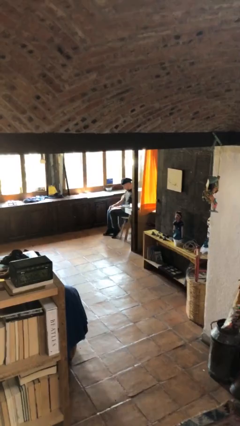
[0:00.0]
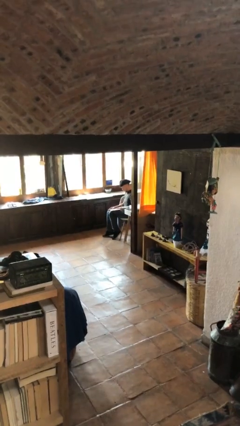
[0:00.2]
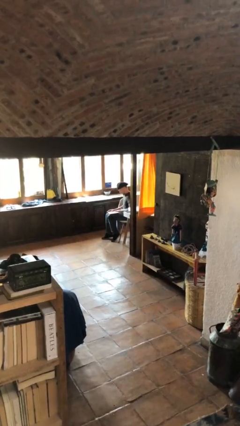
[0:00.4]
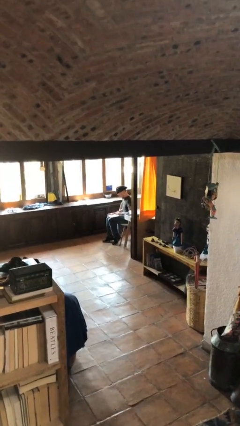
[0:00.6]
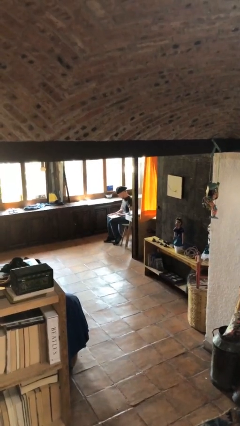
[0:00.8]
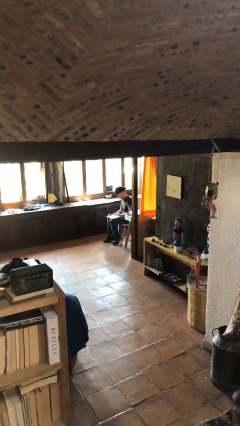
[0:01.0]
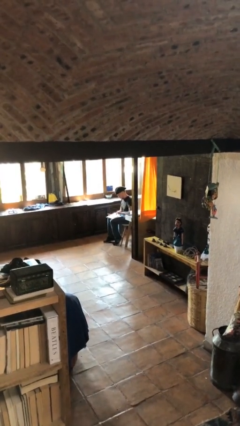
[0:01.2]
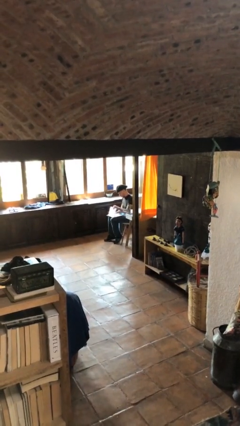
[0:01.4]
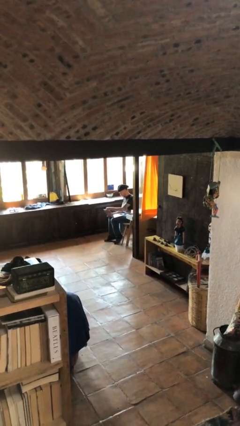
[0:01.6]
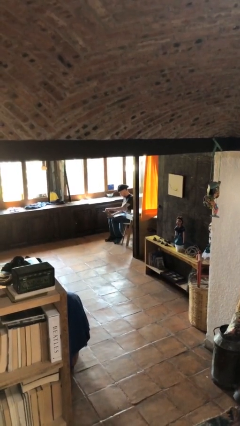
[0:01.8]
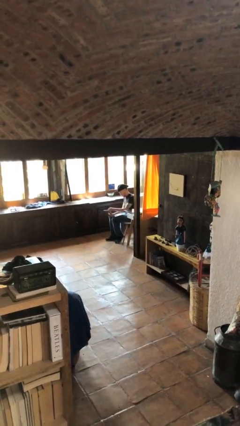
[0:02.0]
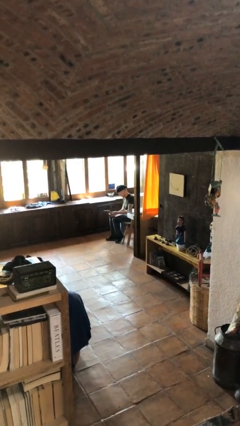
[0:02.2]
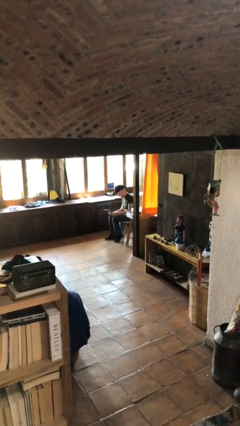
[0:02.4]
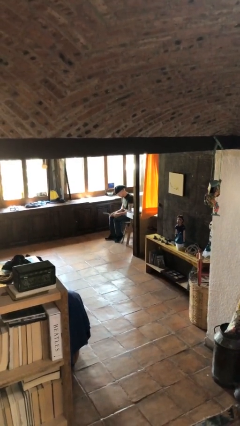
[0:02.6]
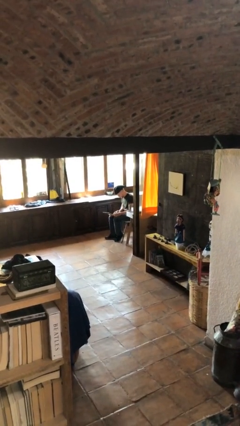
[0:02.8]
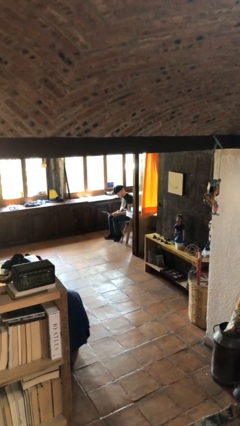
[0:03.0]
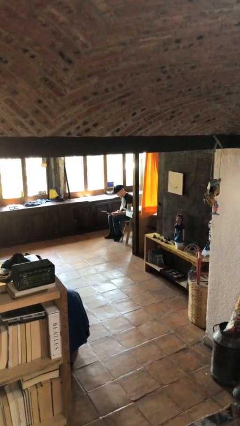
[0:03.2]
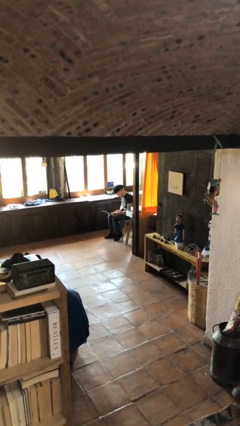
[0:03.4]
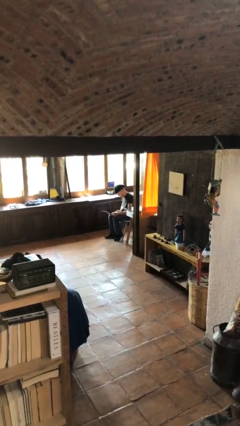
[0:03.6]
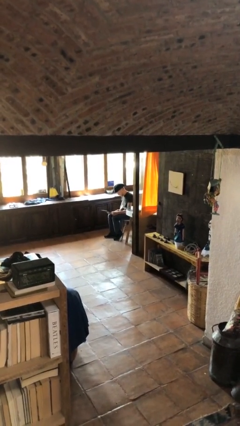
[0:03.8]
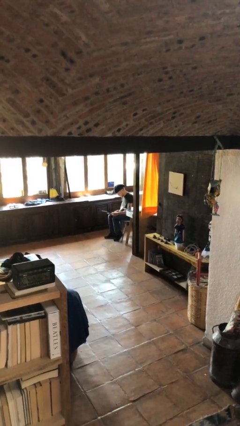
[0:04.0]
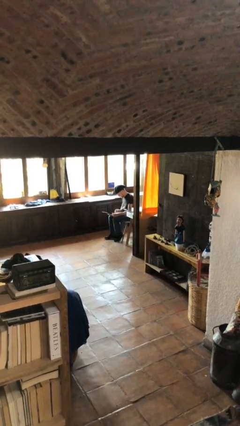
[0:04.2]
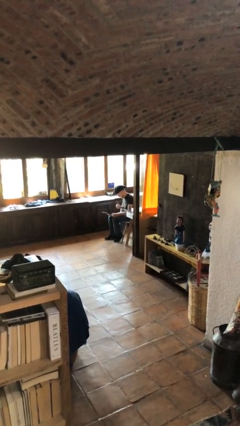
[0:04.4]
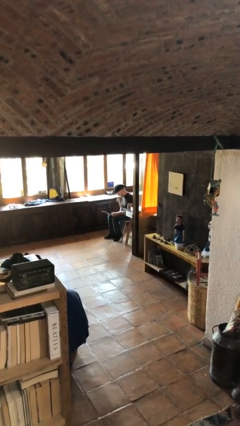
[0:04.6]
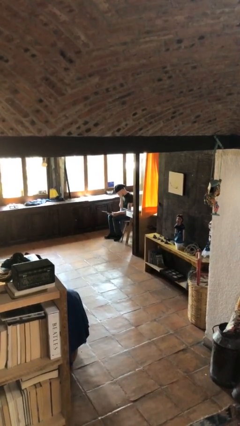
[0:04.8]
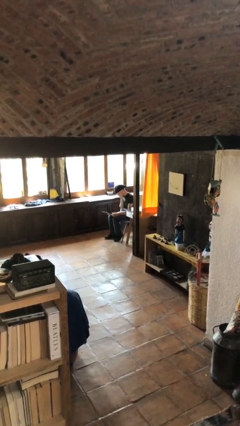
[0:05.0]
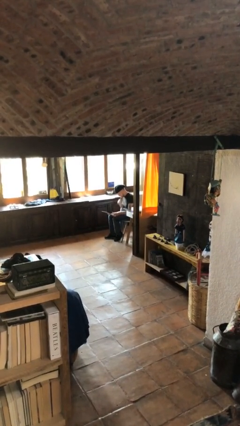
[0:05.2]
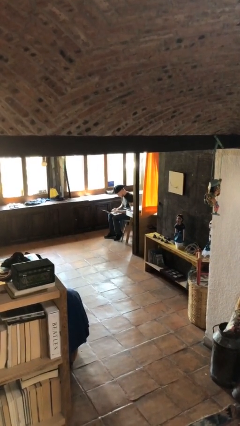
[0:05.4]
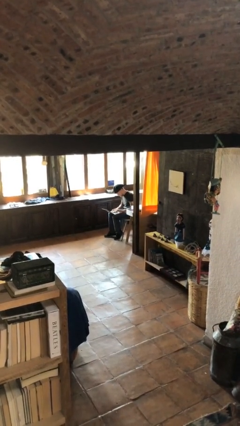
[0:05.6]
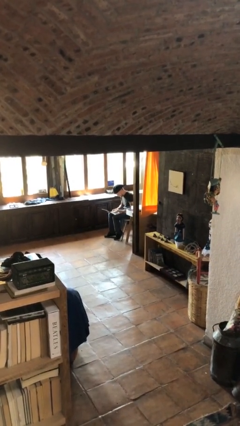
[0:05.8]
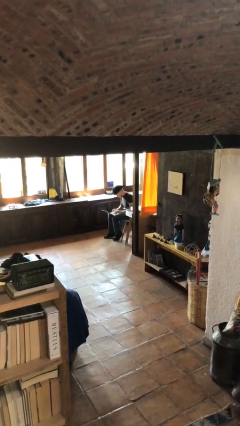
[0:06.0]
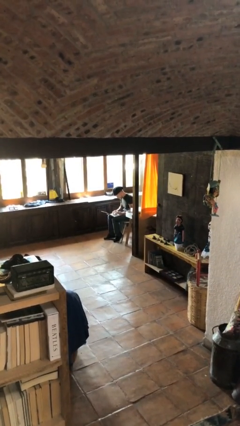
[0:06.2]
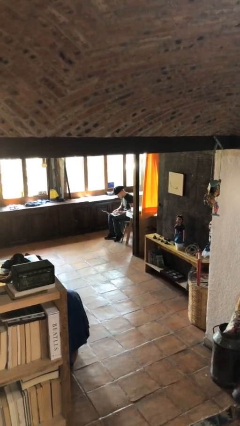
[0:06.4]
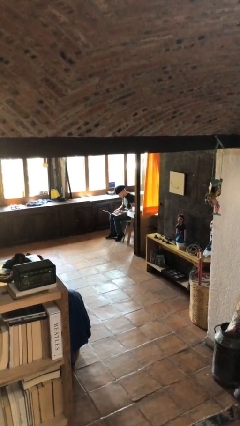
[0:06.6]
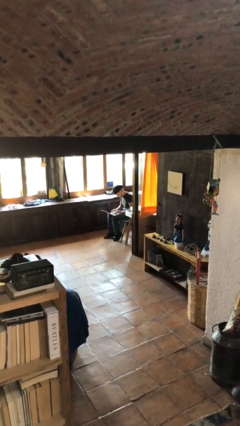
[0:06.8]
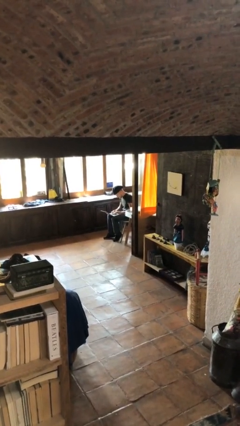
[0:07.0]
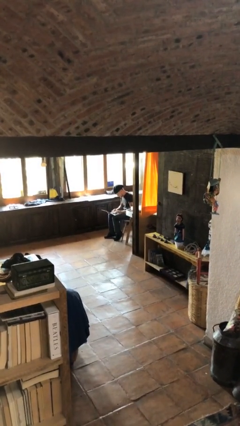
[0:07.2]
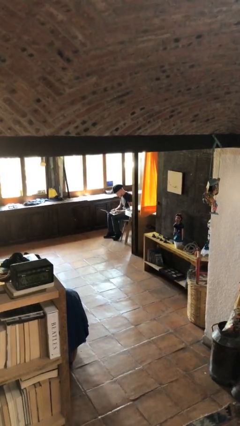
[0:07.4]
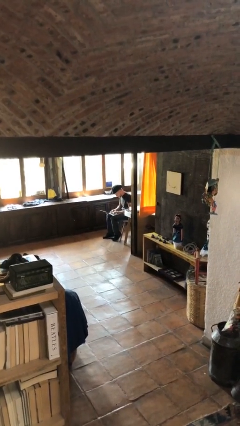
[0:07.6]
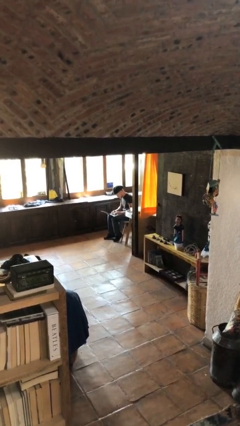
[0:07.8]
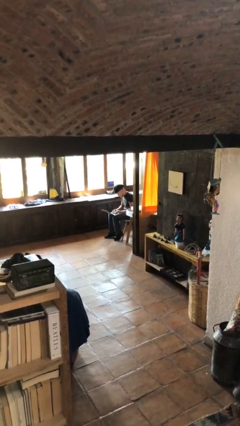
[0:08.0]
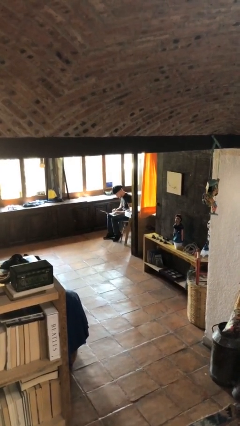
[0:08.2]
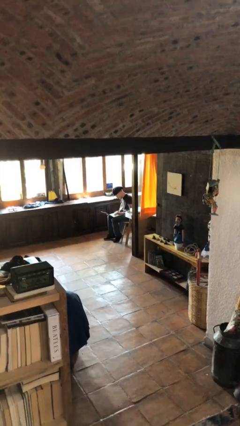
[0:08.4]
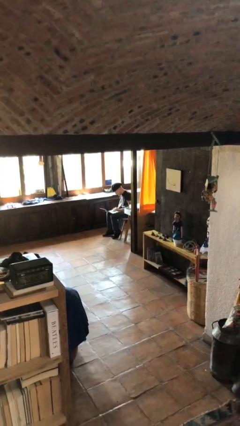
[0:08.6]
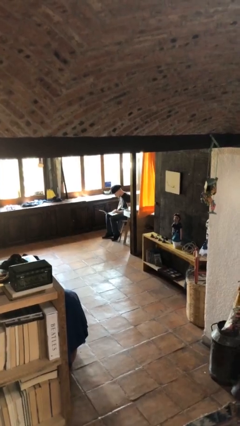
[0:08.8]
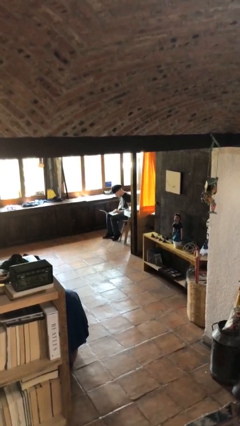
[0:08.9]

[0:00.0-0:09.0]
person interacts with laptop

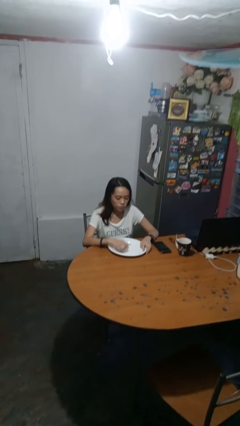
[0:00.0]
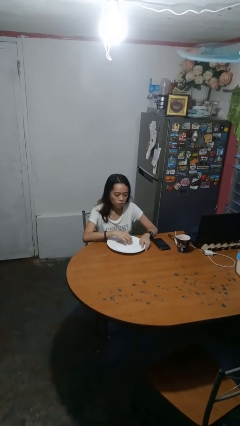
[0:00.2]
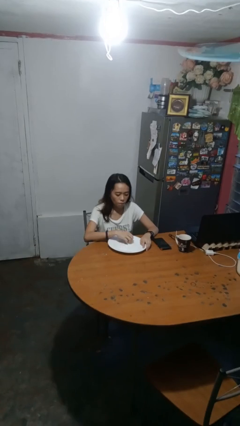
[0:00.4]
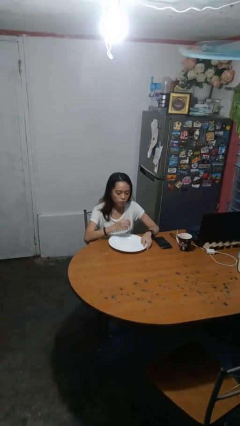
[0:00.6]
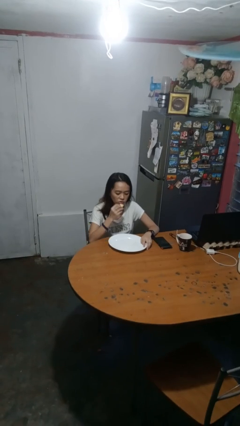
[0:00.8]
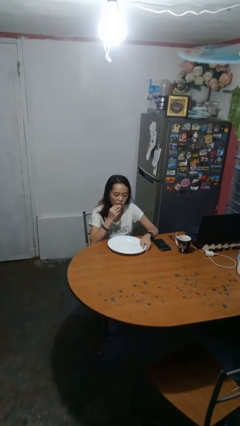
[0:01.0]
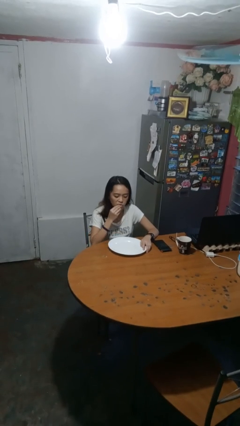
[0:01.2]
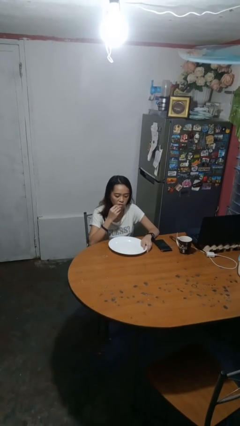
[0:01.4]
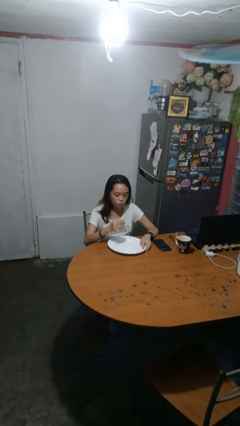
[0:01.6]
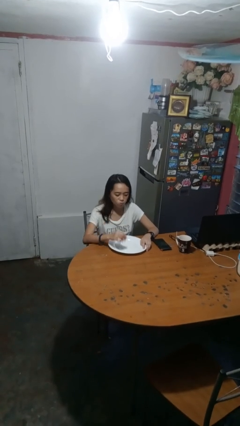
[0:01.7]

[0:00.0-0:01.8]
person eats with hands

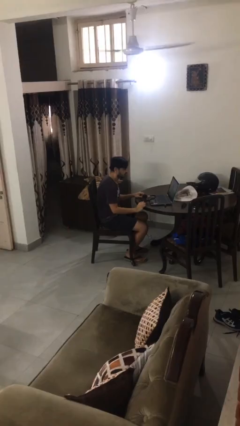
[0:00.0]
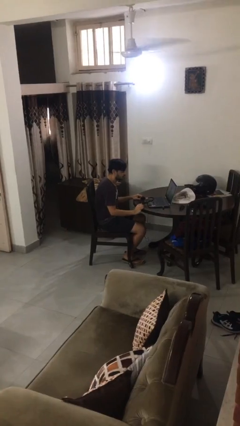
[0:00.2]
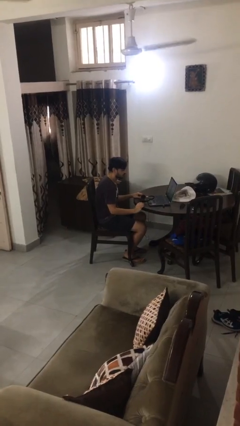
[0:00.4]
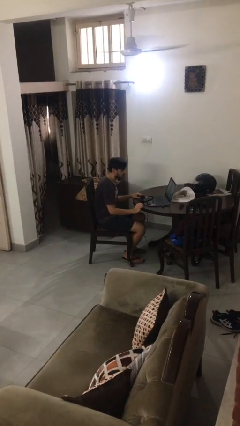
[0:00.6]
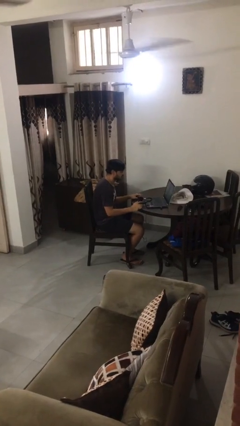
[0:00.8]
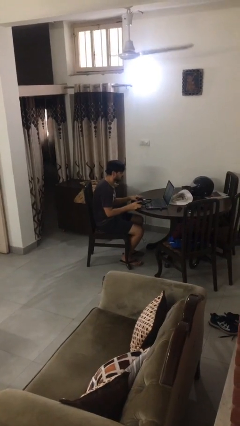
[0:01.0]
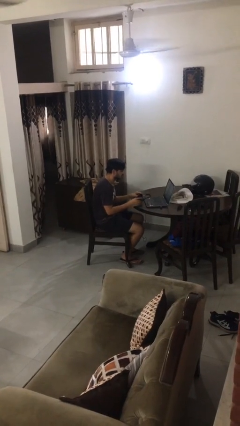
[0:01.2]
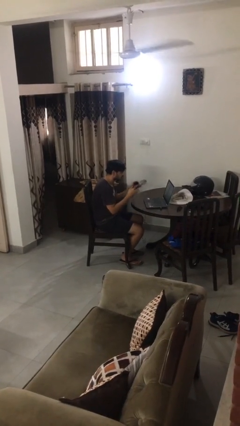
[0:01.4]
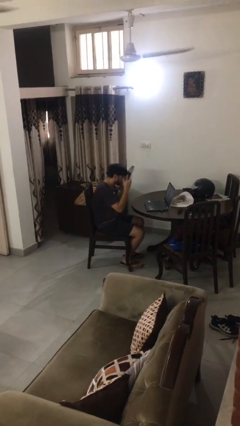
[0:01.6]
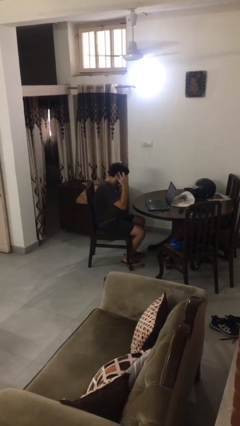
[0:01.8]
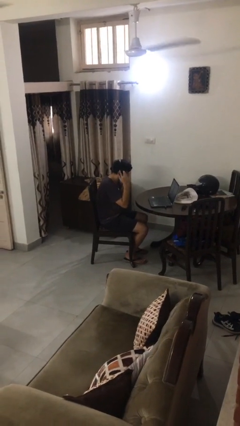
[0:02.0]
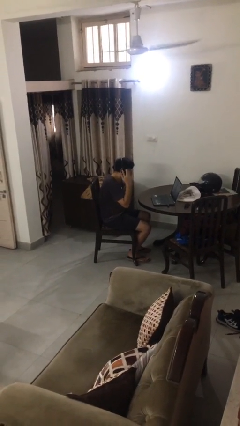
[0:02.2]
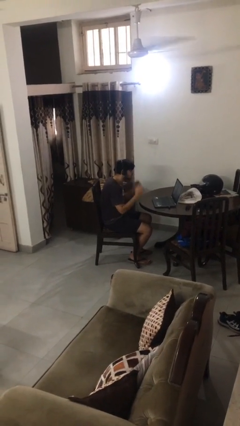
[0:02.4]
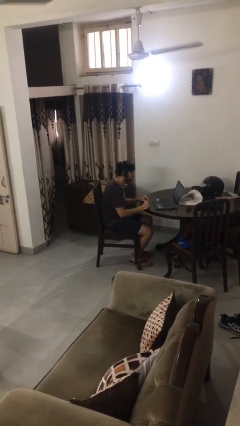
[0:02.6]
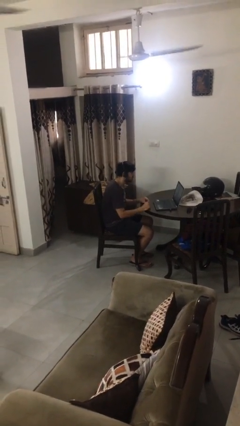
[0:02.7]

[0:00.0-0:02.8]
person puts on headphones

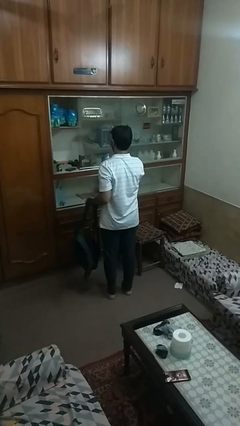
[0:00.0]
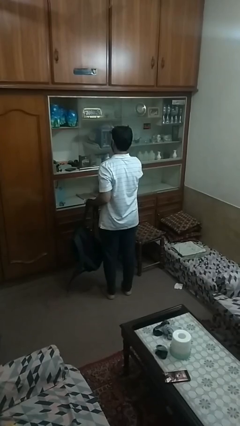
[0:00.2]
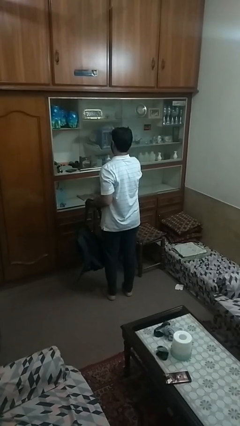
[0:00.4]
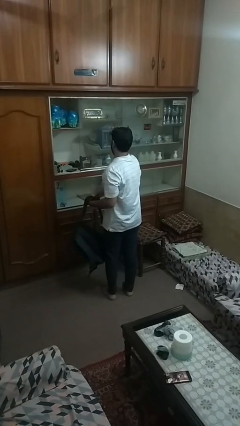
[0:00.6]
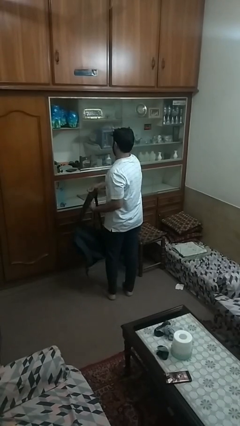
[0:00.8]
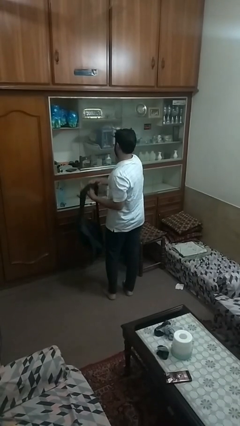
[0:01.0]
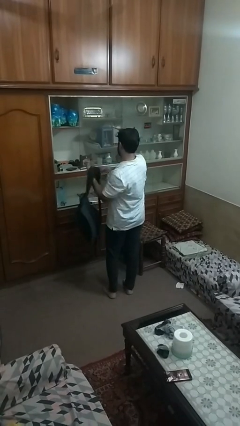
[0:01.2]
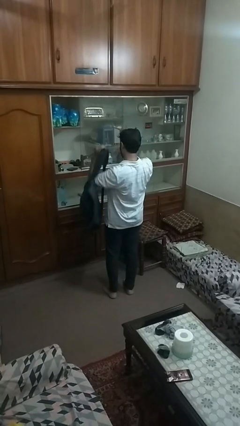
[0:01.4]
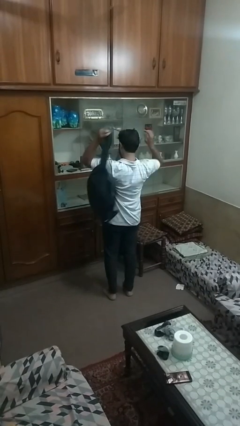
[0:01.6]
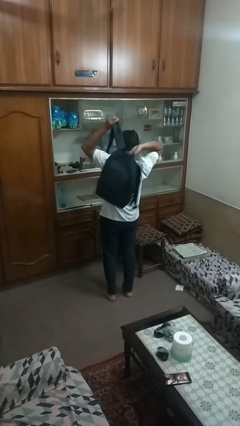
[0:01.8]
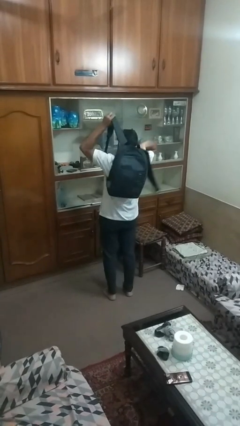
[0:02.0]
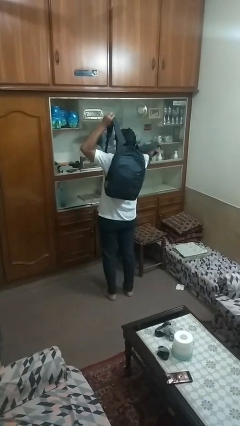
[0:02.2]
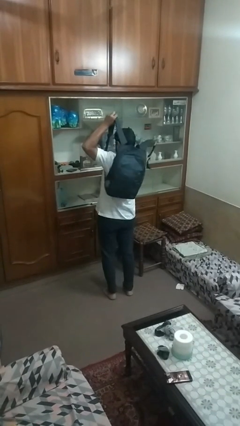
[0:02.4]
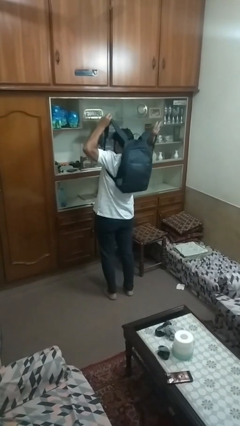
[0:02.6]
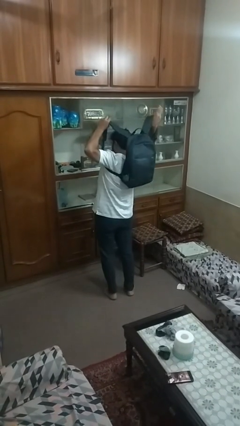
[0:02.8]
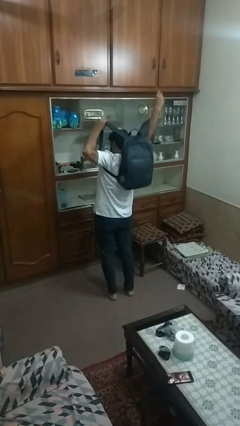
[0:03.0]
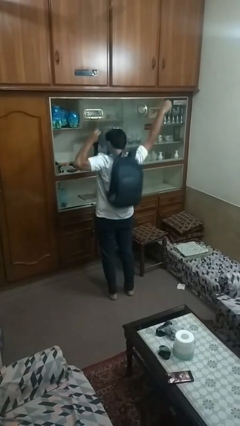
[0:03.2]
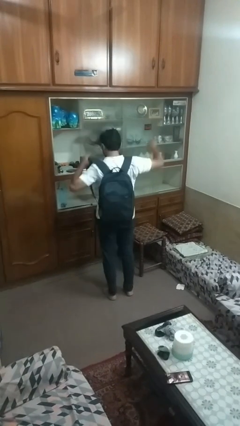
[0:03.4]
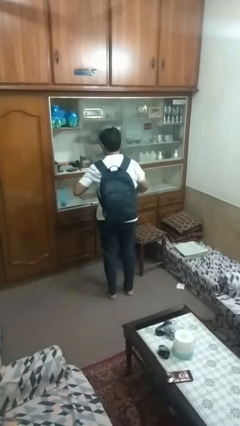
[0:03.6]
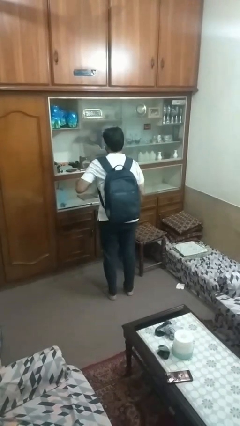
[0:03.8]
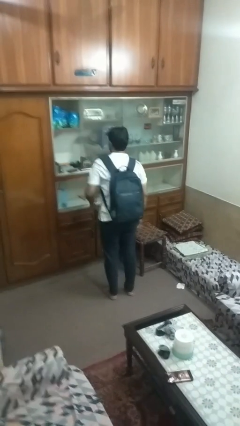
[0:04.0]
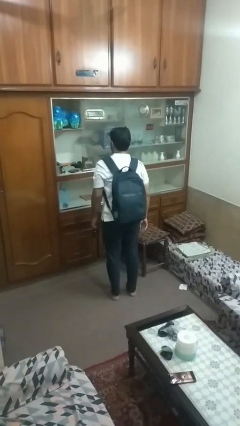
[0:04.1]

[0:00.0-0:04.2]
person puts on backpack

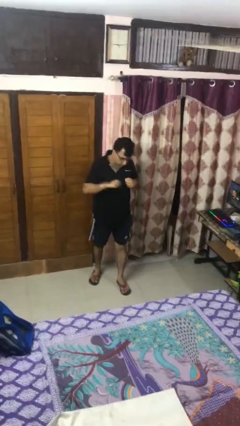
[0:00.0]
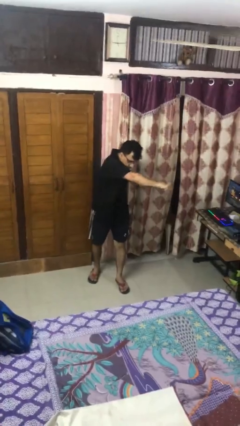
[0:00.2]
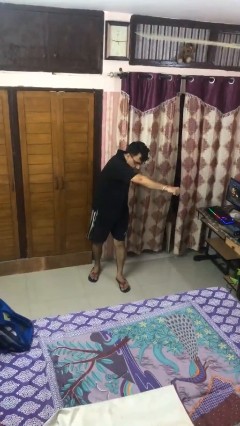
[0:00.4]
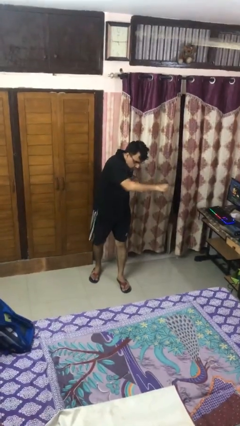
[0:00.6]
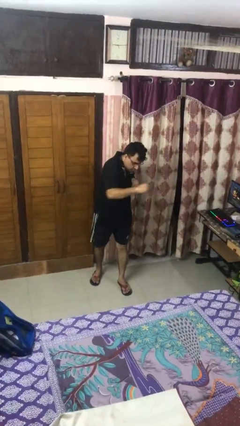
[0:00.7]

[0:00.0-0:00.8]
person punches
